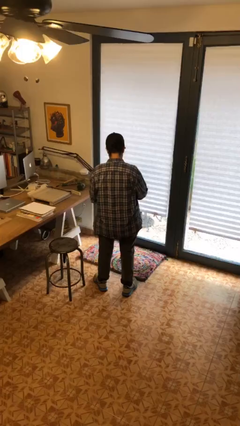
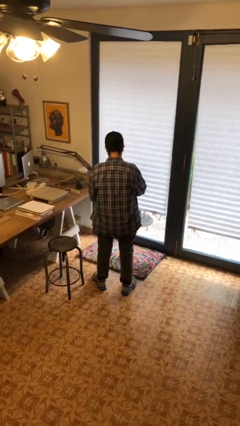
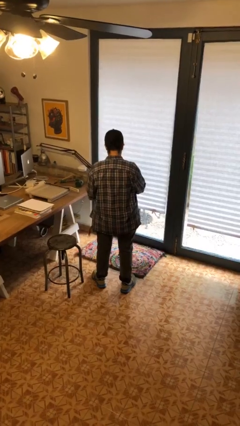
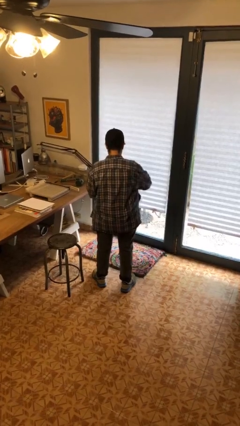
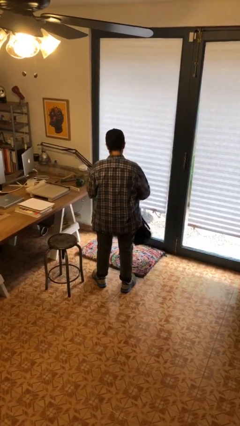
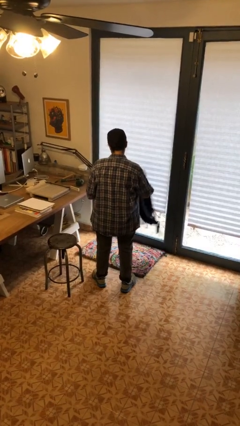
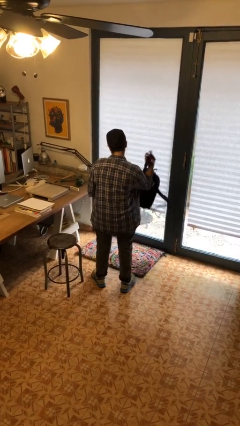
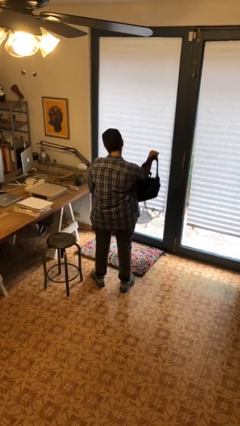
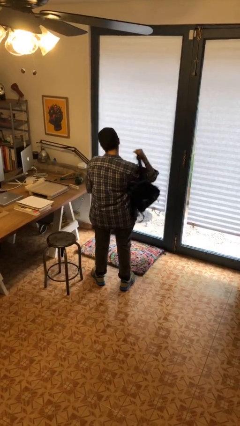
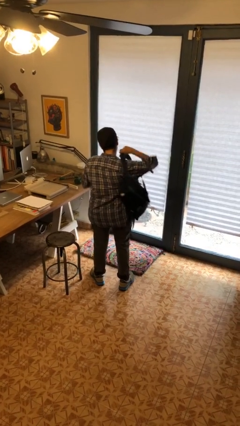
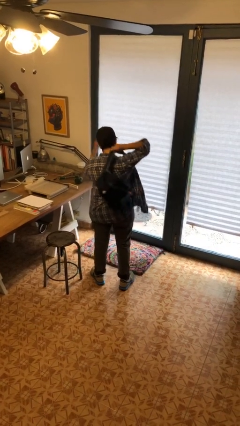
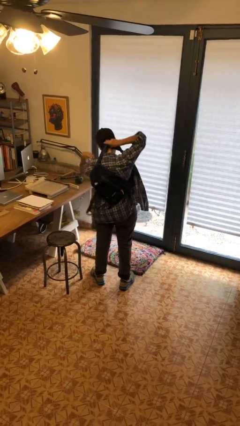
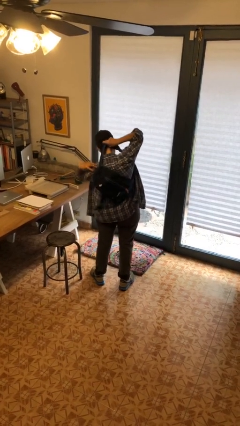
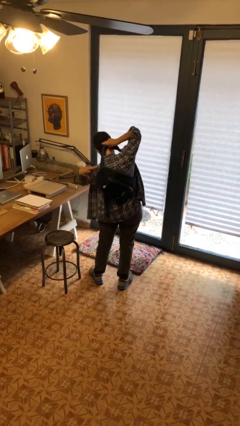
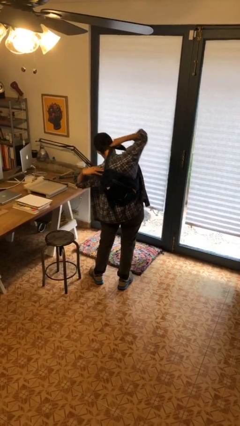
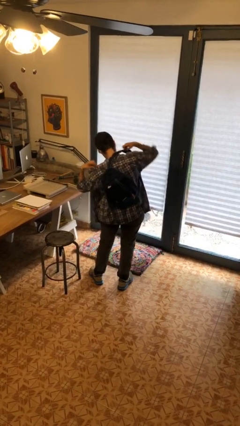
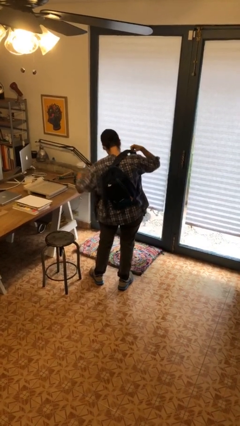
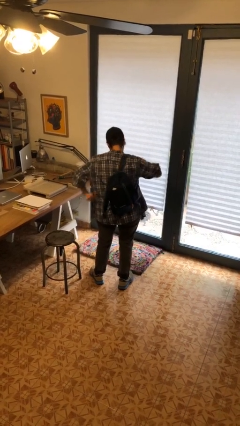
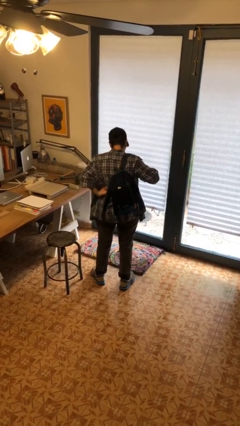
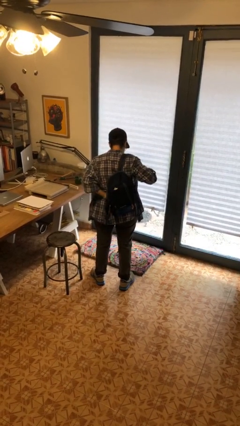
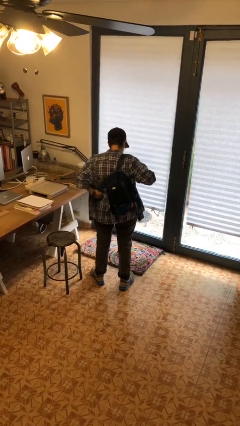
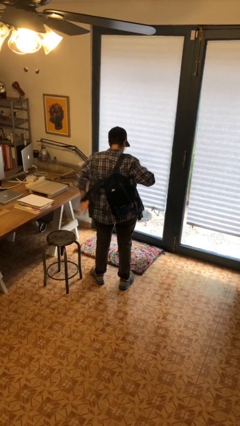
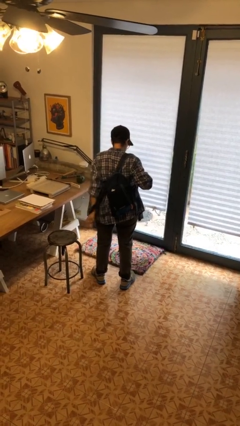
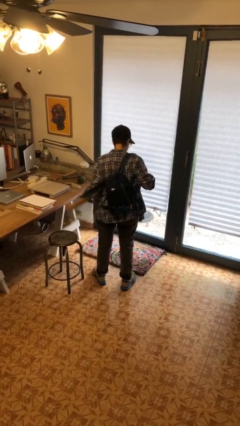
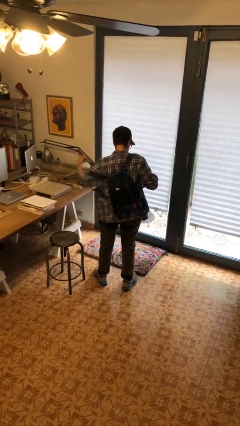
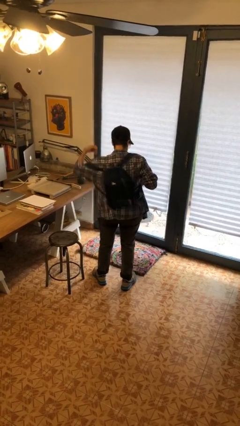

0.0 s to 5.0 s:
person puts on backpack

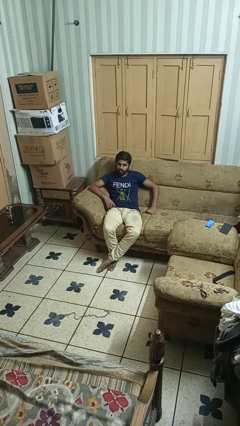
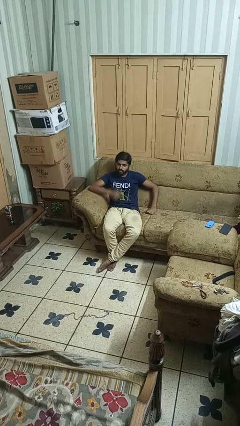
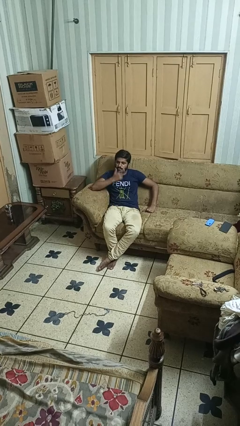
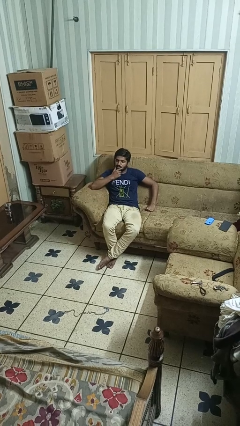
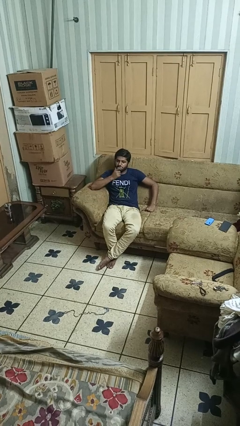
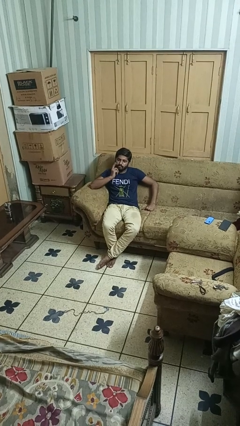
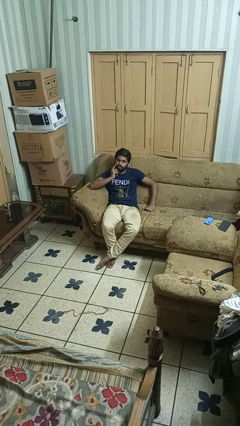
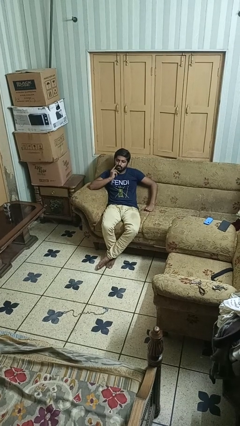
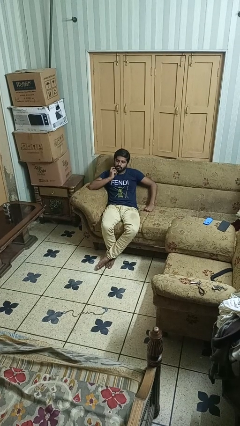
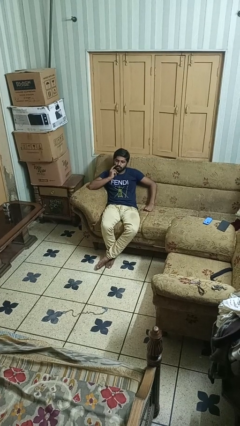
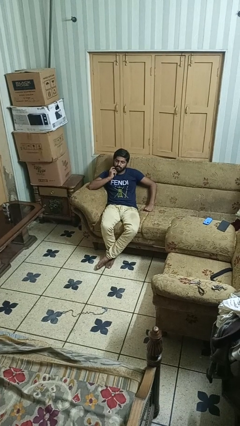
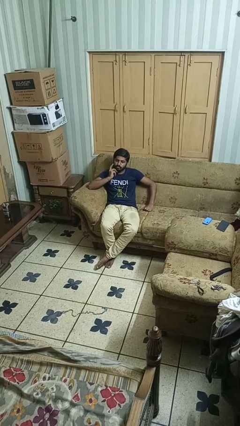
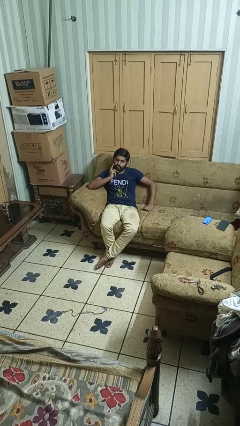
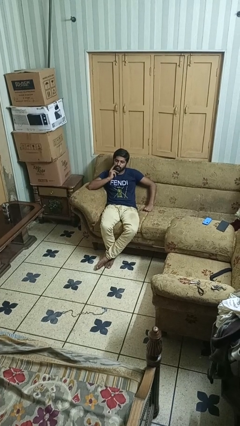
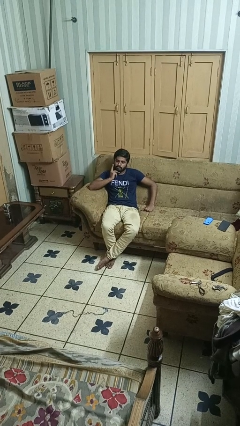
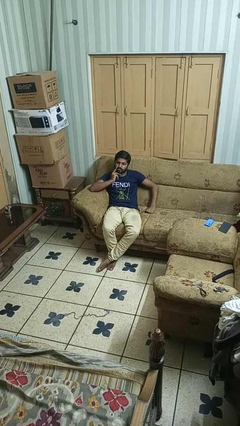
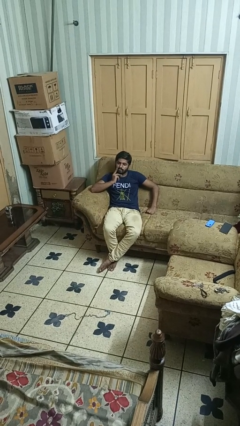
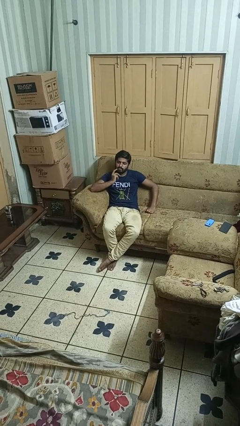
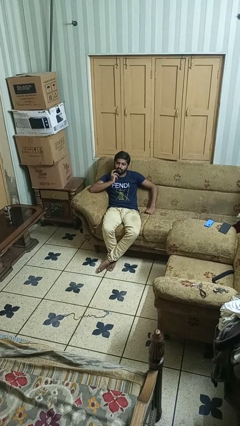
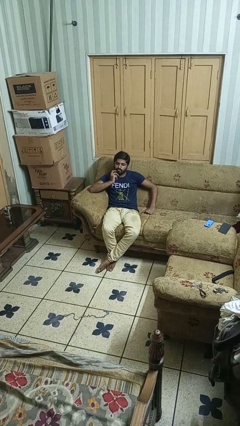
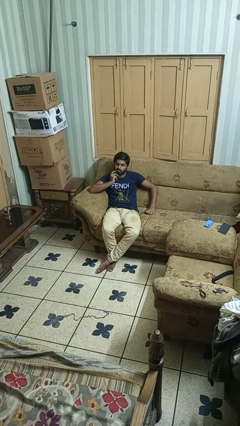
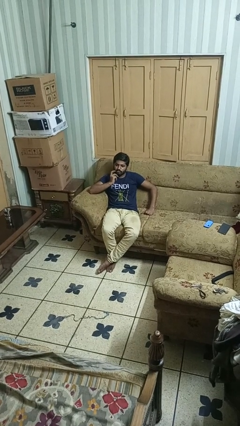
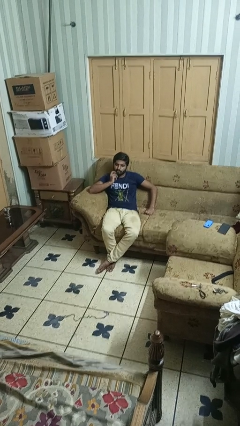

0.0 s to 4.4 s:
person strokes chin

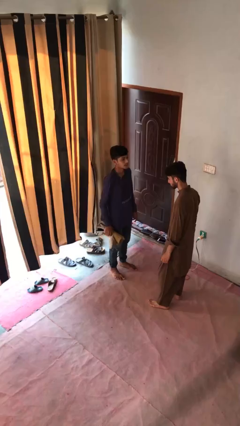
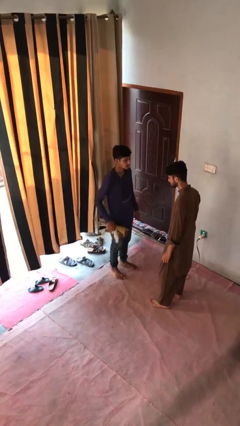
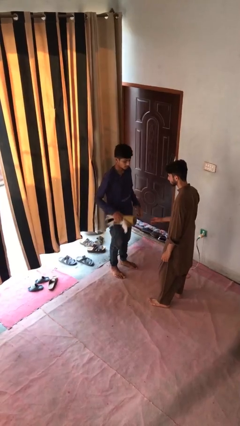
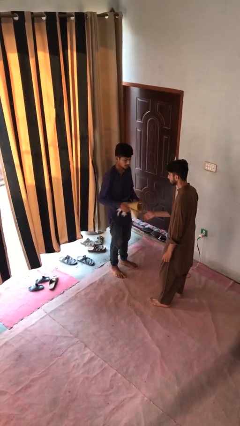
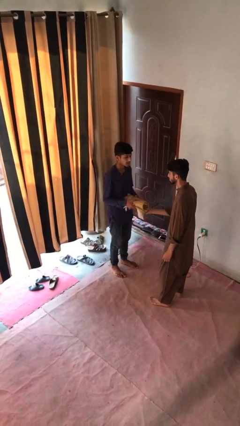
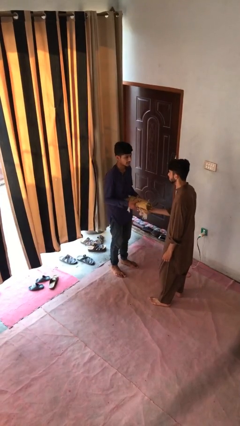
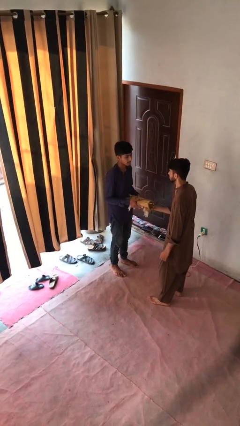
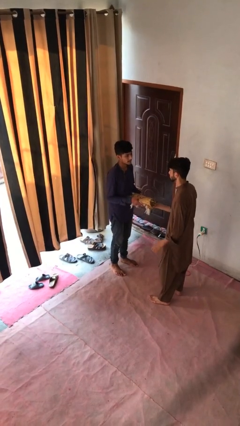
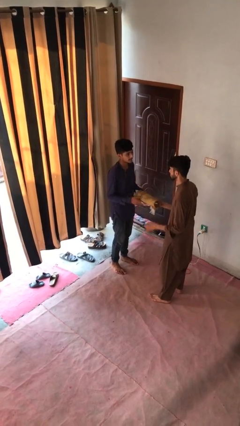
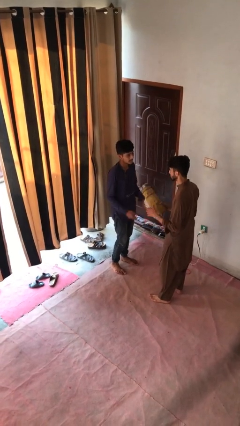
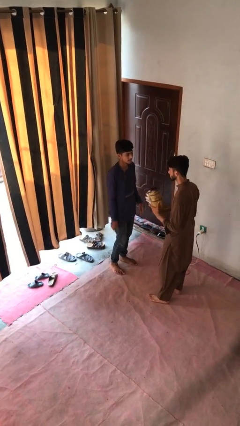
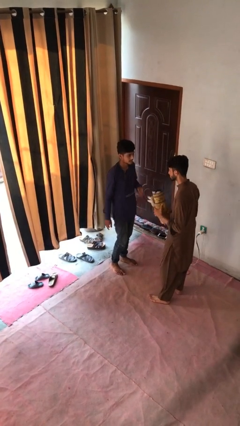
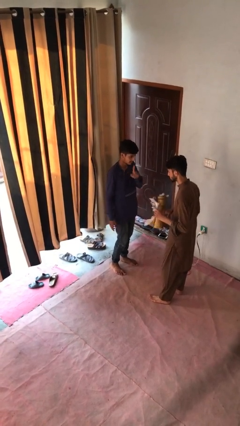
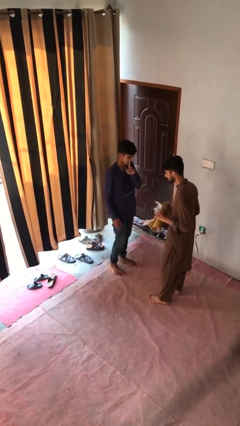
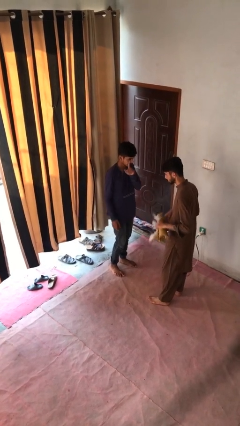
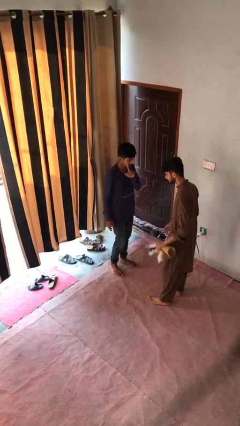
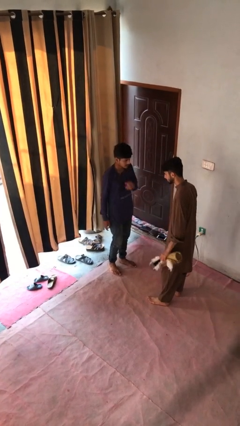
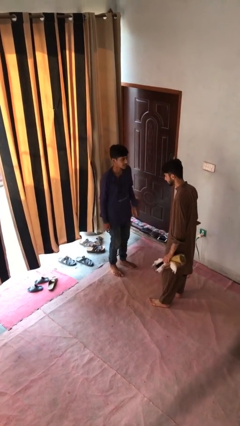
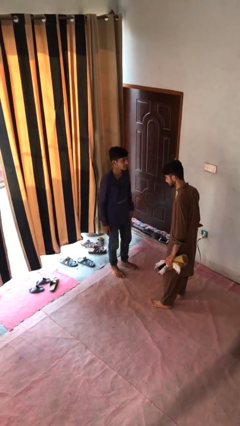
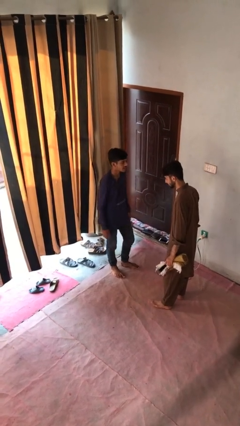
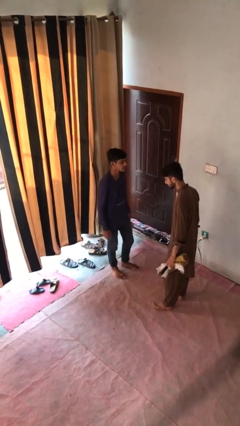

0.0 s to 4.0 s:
person transfers object to person

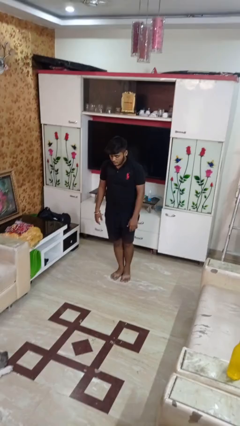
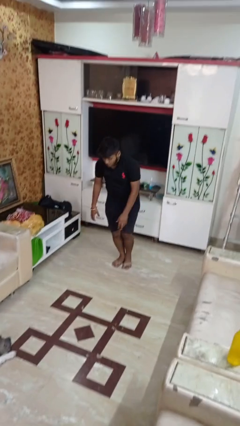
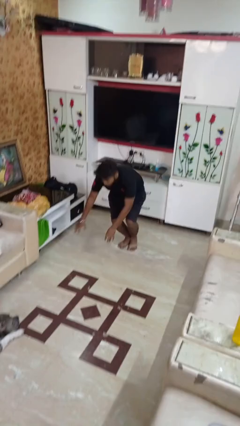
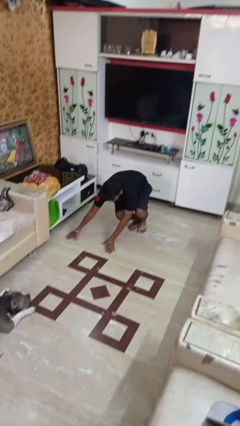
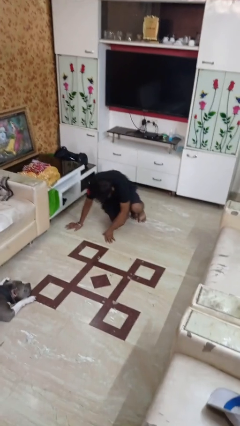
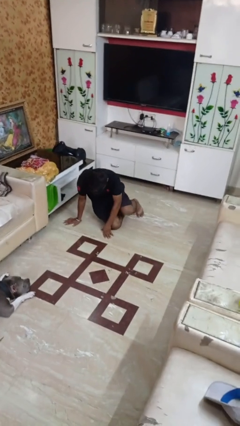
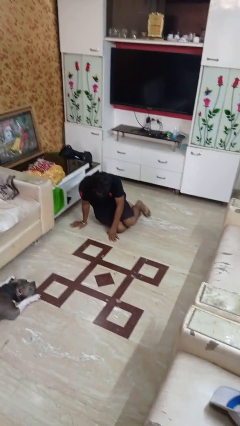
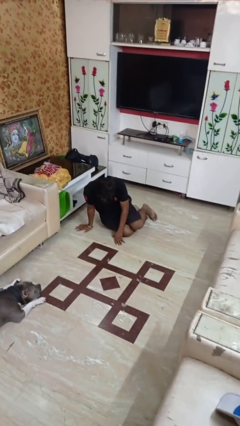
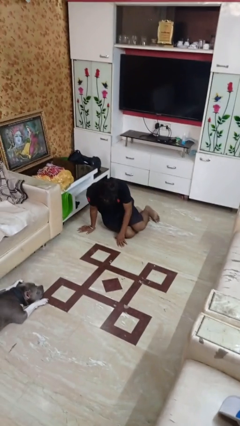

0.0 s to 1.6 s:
person falls while standing

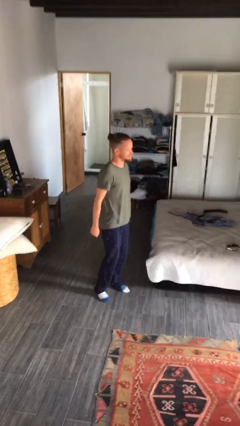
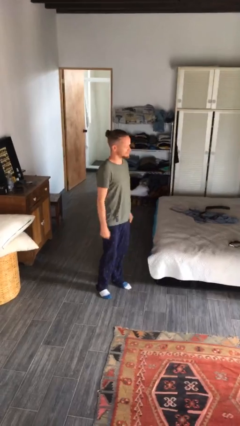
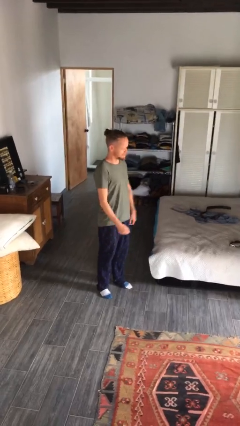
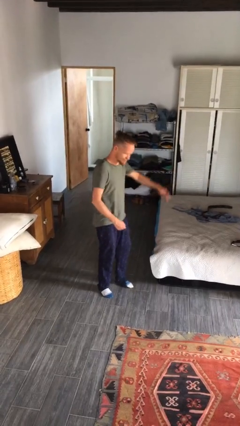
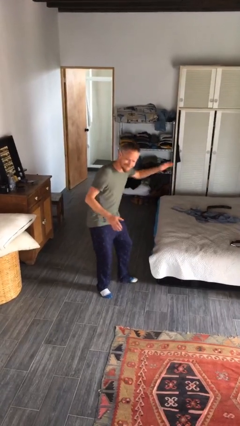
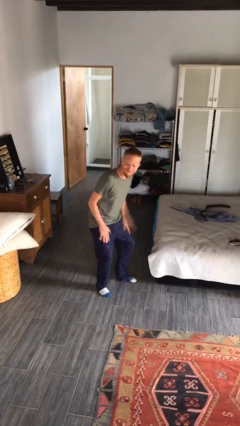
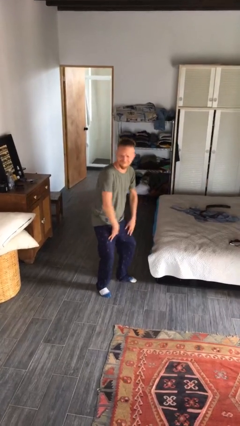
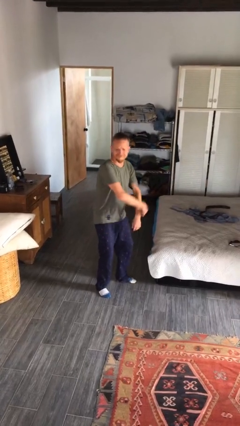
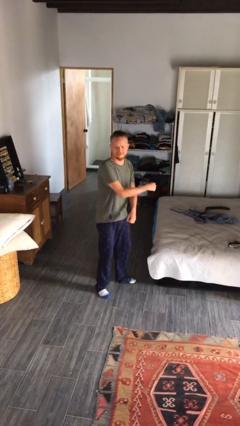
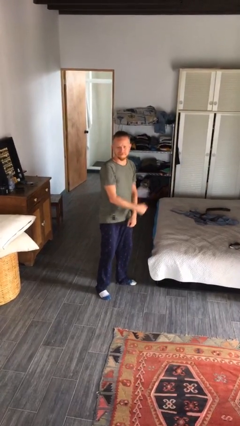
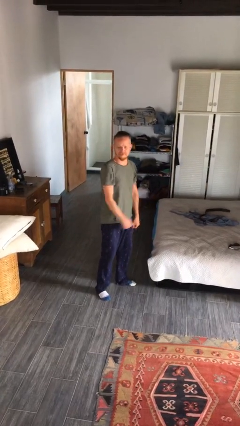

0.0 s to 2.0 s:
person slaps hands on thighs

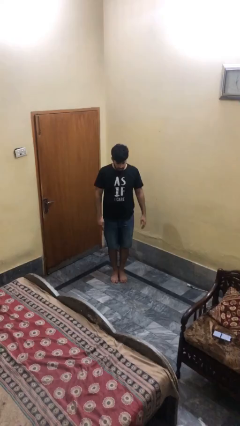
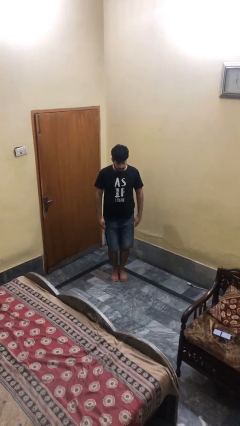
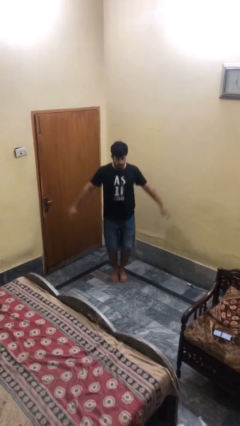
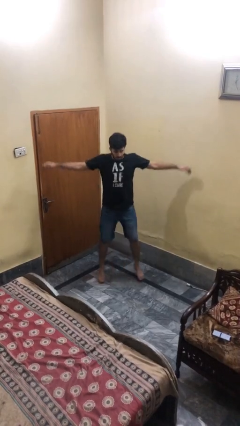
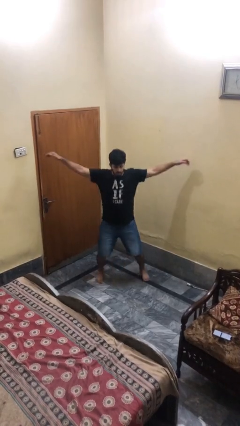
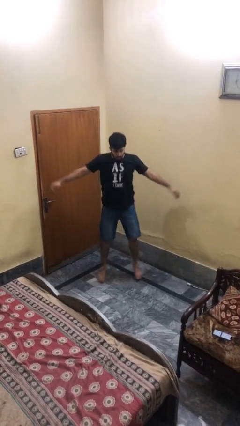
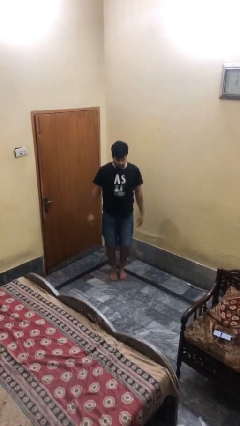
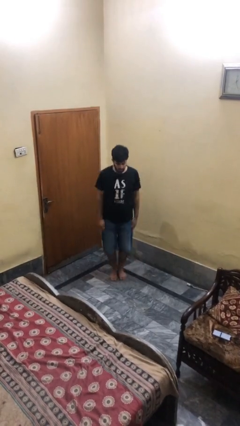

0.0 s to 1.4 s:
person exercises with jumping jacks
